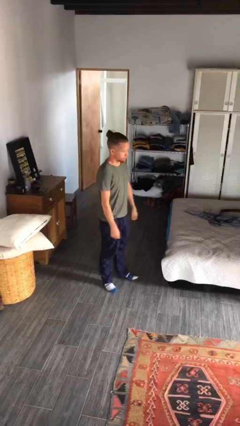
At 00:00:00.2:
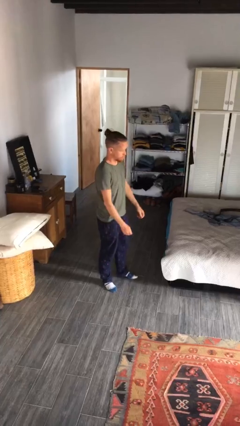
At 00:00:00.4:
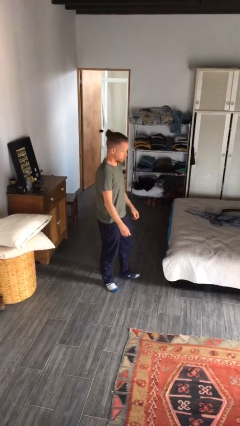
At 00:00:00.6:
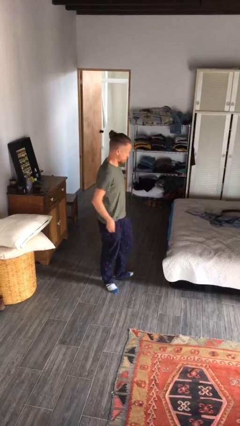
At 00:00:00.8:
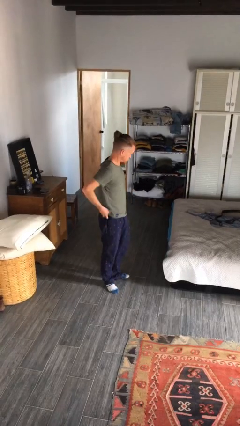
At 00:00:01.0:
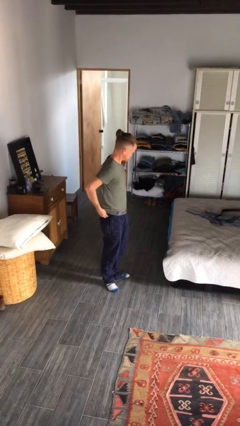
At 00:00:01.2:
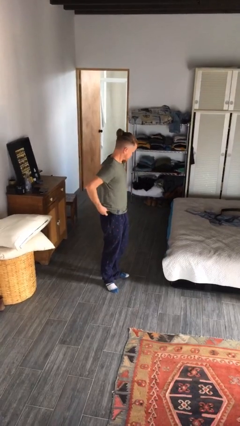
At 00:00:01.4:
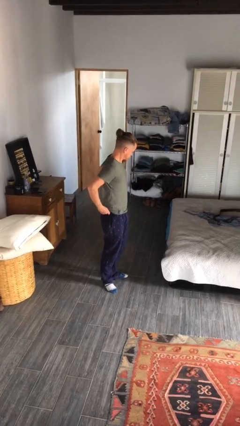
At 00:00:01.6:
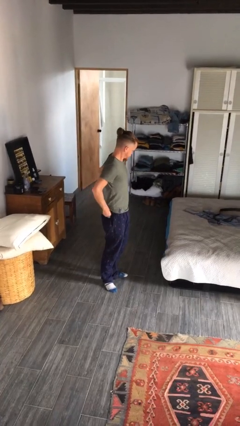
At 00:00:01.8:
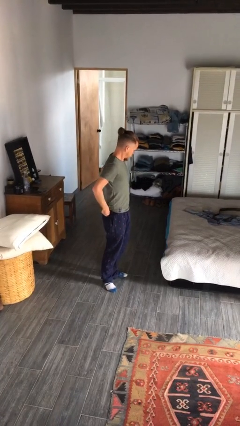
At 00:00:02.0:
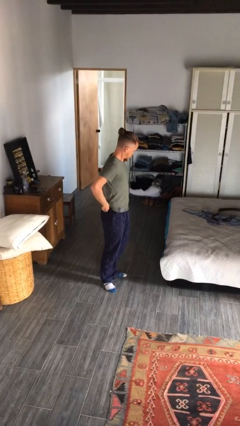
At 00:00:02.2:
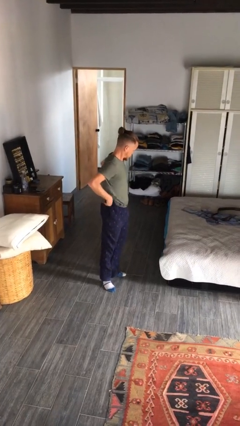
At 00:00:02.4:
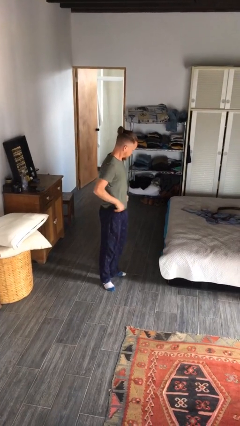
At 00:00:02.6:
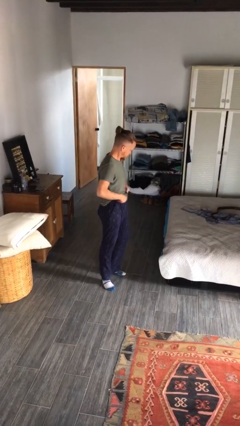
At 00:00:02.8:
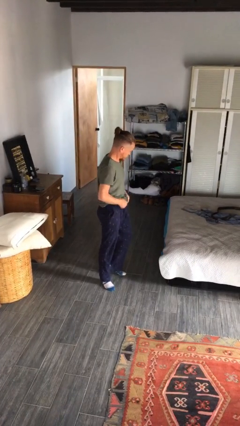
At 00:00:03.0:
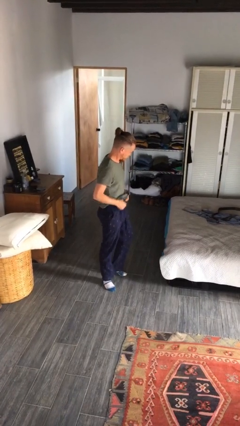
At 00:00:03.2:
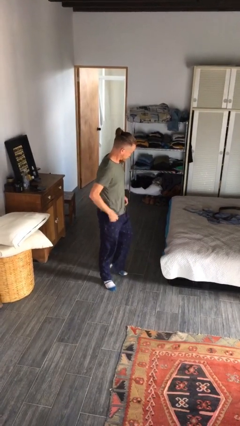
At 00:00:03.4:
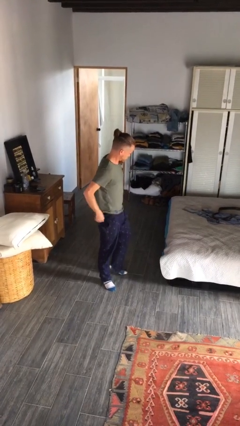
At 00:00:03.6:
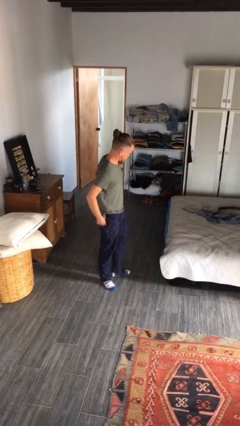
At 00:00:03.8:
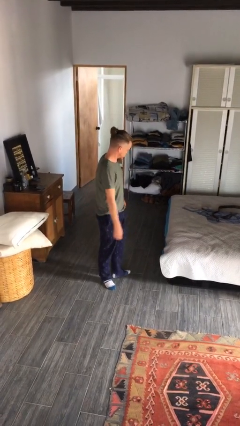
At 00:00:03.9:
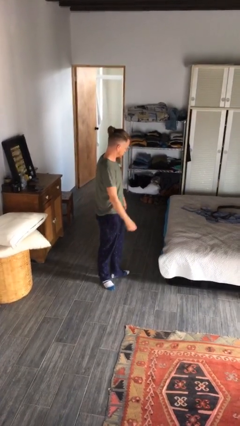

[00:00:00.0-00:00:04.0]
person hikes up pants

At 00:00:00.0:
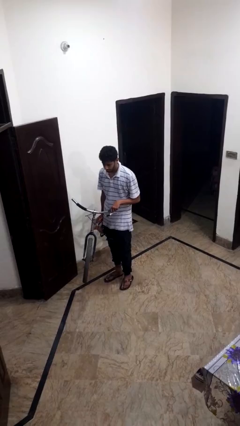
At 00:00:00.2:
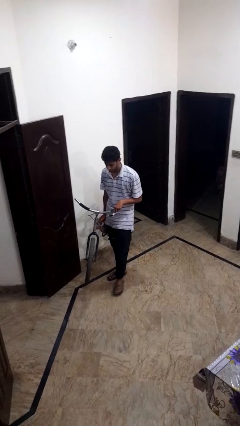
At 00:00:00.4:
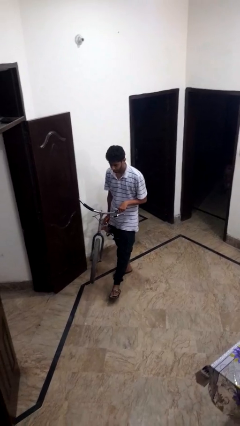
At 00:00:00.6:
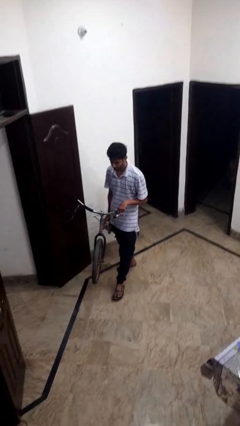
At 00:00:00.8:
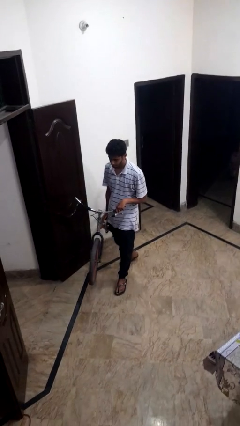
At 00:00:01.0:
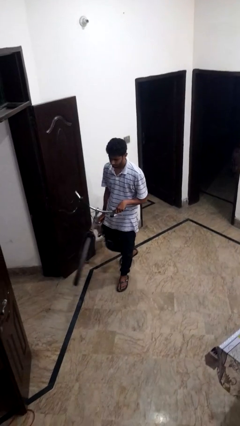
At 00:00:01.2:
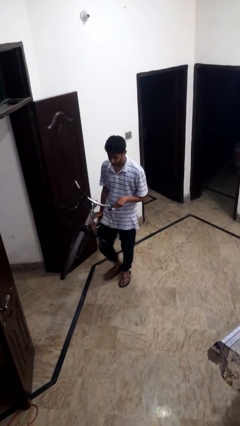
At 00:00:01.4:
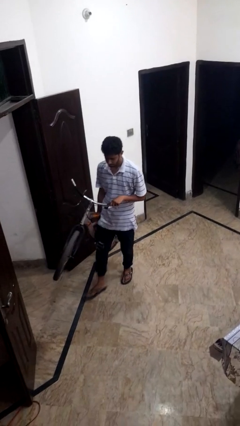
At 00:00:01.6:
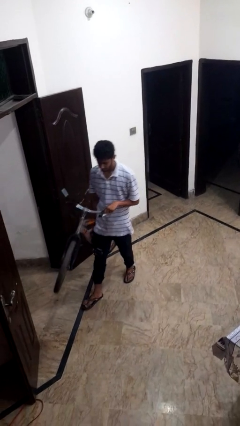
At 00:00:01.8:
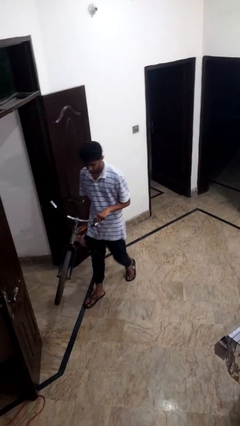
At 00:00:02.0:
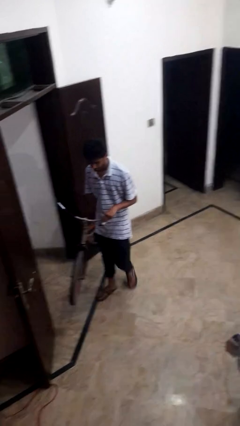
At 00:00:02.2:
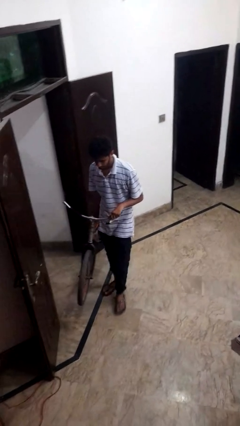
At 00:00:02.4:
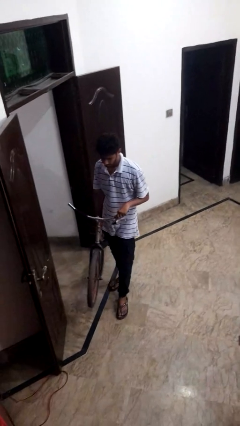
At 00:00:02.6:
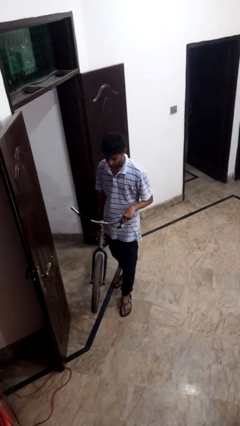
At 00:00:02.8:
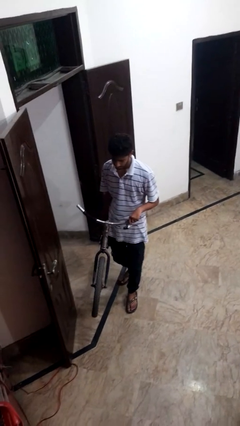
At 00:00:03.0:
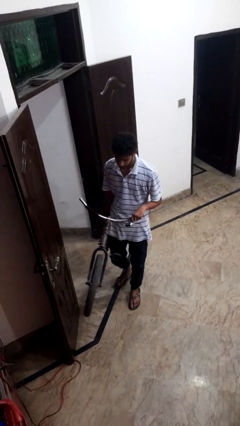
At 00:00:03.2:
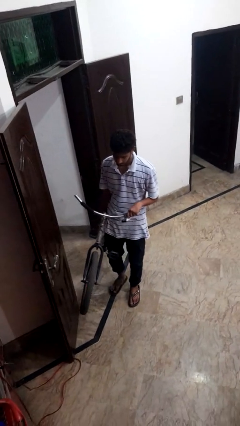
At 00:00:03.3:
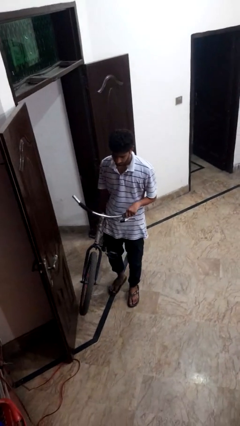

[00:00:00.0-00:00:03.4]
person carries bicycle

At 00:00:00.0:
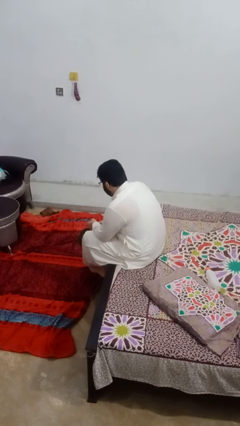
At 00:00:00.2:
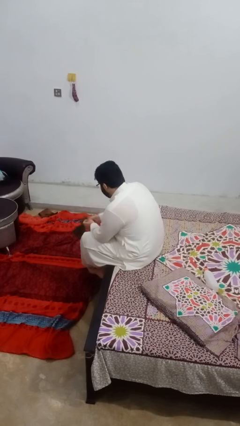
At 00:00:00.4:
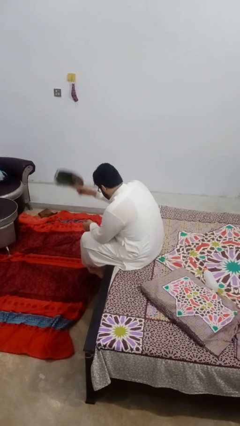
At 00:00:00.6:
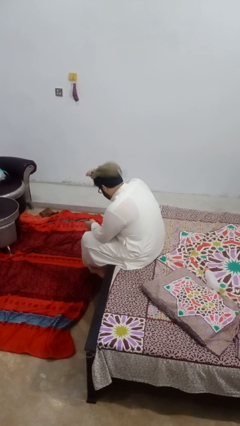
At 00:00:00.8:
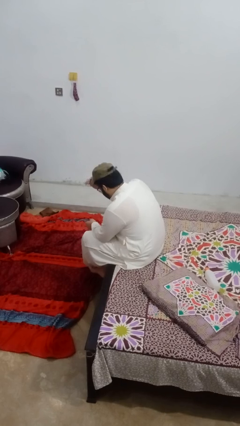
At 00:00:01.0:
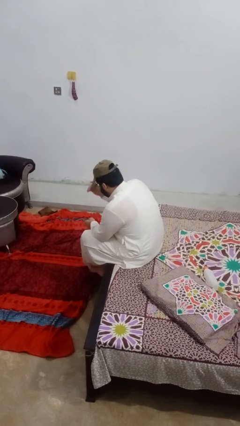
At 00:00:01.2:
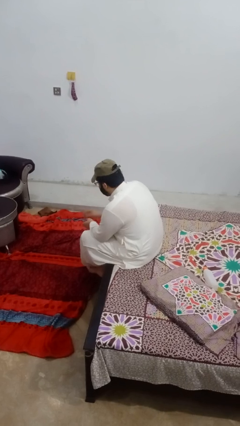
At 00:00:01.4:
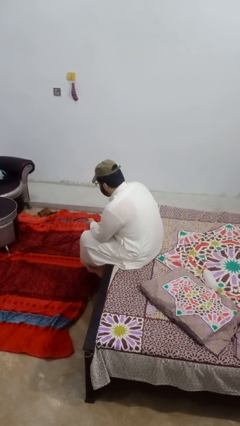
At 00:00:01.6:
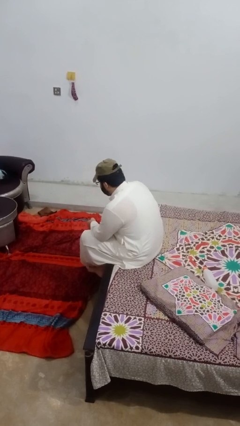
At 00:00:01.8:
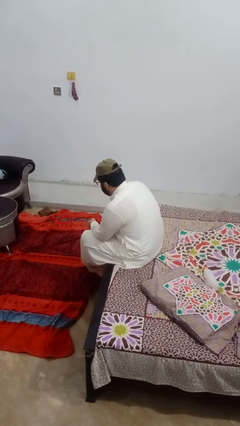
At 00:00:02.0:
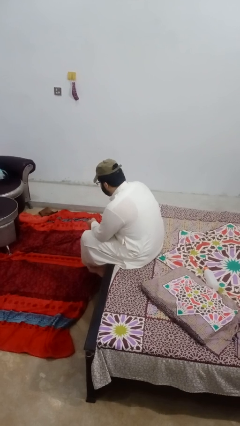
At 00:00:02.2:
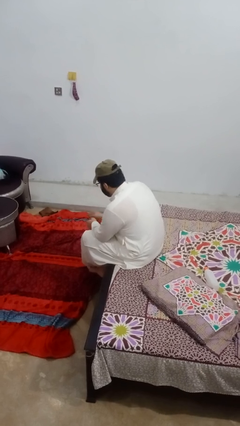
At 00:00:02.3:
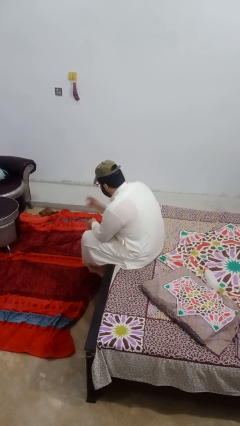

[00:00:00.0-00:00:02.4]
person puts on hat

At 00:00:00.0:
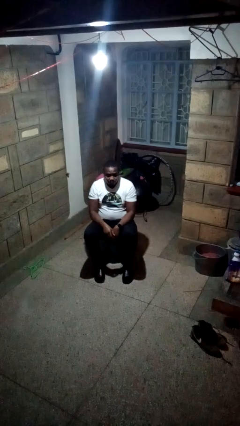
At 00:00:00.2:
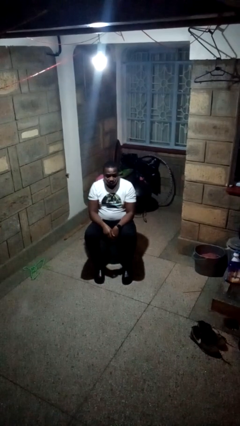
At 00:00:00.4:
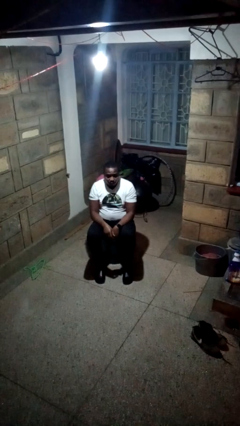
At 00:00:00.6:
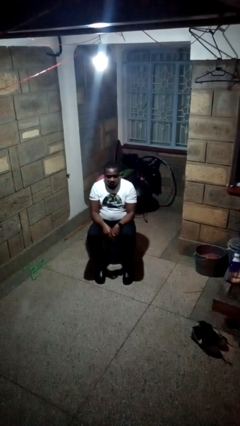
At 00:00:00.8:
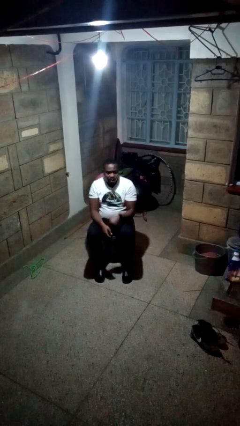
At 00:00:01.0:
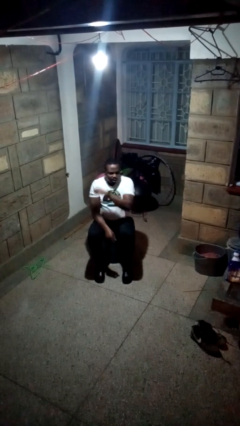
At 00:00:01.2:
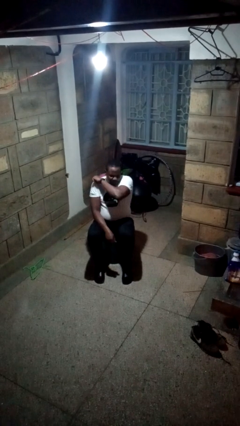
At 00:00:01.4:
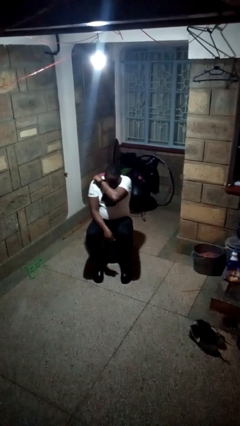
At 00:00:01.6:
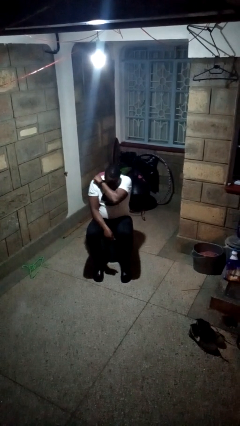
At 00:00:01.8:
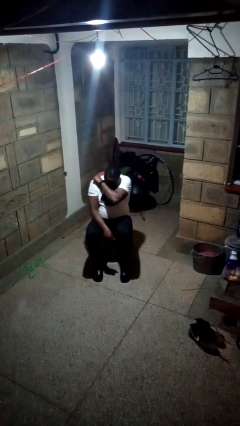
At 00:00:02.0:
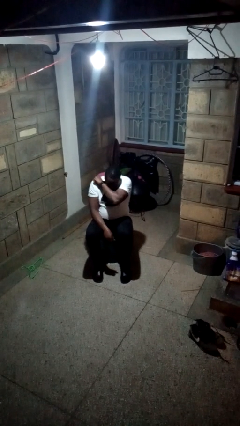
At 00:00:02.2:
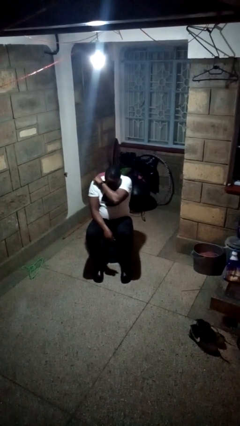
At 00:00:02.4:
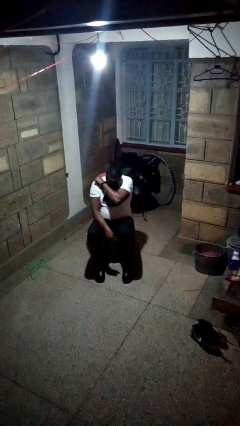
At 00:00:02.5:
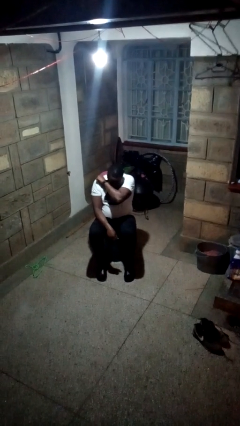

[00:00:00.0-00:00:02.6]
person sneezes into arm

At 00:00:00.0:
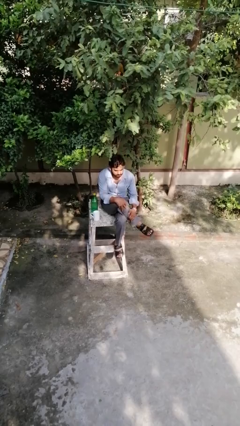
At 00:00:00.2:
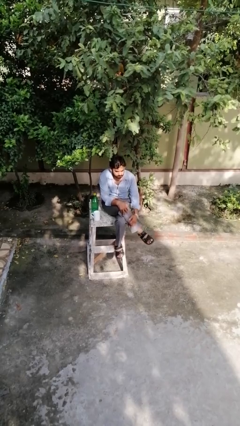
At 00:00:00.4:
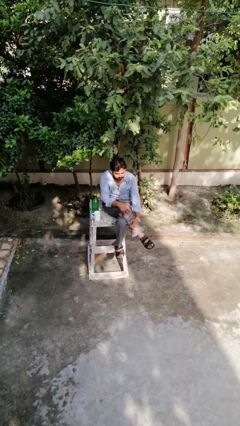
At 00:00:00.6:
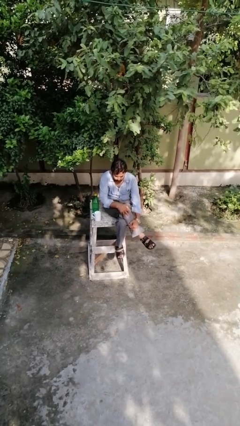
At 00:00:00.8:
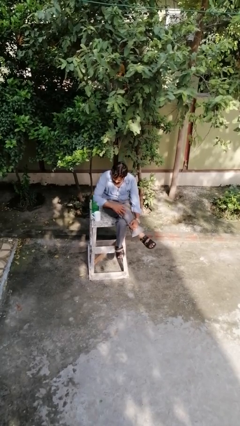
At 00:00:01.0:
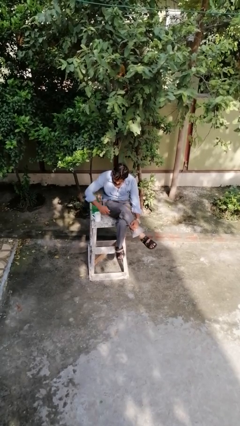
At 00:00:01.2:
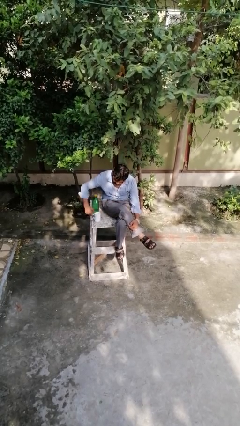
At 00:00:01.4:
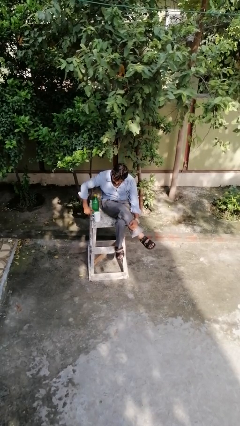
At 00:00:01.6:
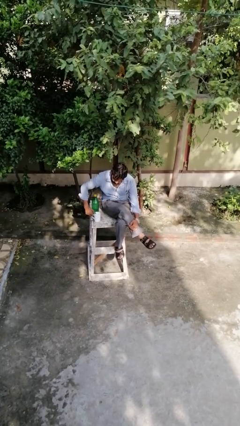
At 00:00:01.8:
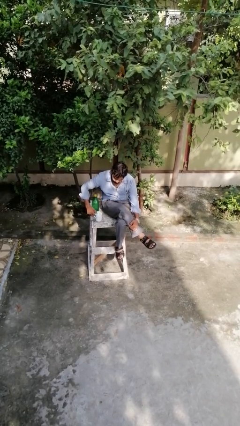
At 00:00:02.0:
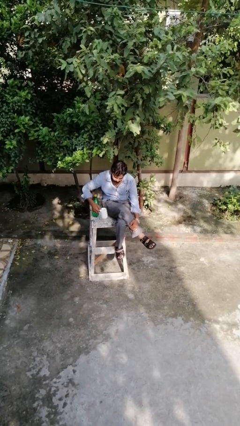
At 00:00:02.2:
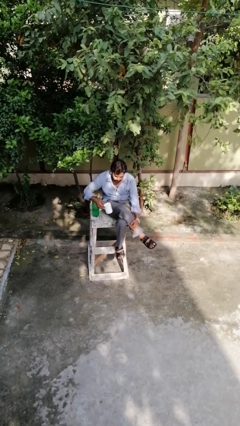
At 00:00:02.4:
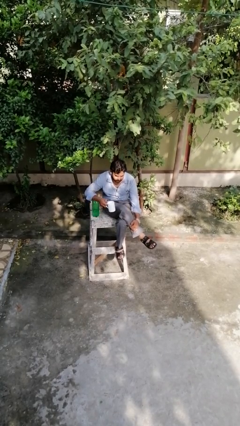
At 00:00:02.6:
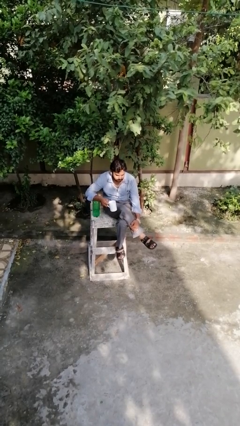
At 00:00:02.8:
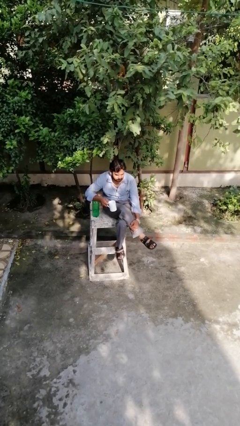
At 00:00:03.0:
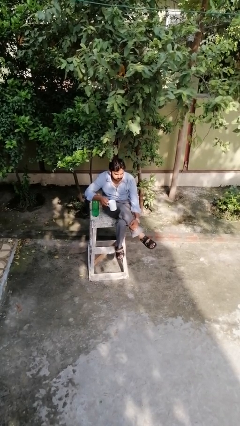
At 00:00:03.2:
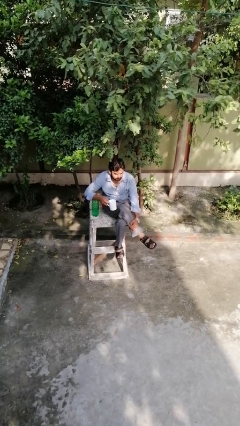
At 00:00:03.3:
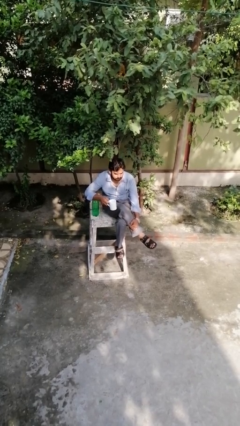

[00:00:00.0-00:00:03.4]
person picks up object from table

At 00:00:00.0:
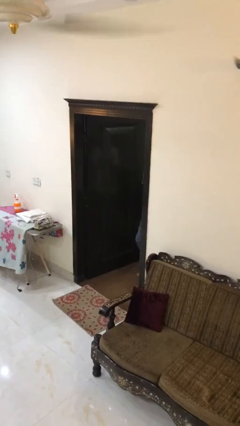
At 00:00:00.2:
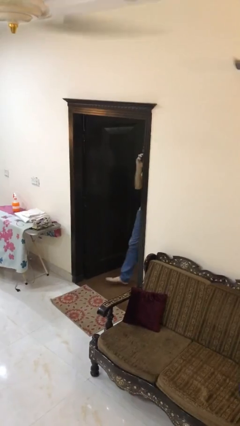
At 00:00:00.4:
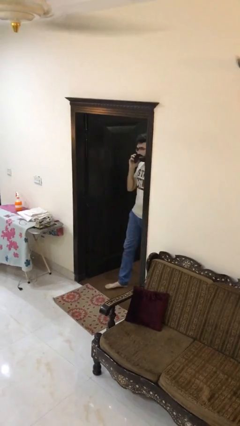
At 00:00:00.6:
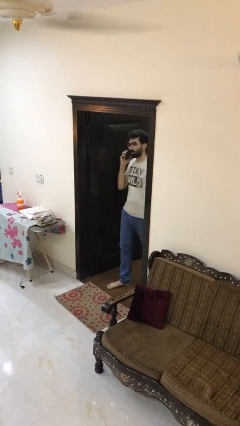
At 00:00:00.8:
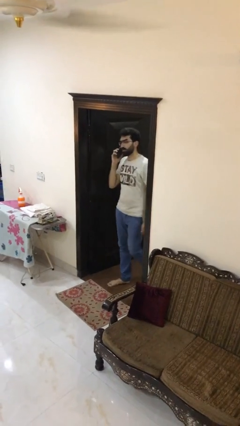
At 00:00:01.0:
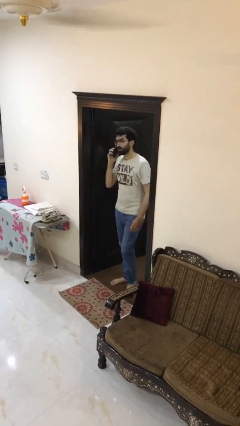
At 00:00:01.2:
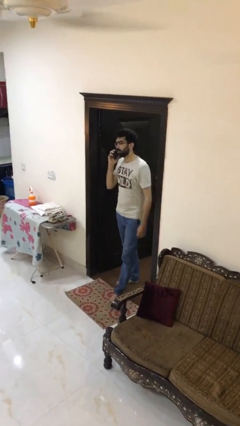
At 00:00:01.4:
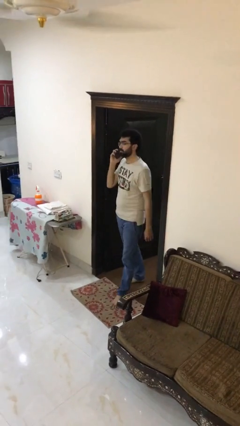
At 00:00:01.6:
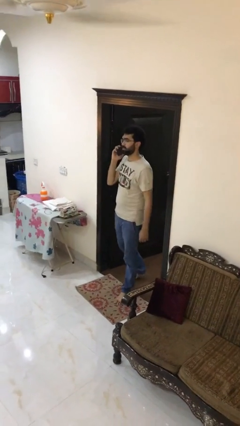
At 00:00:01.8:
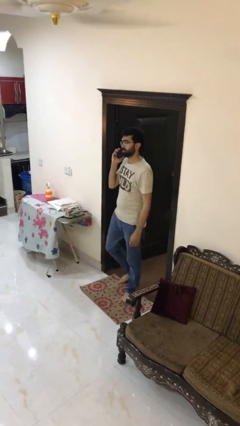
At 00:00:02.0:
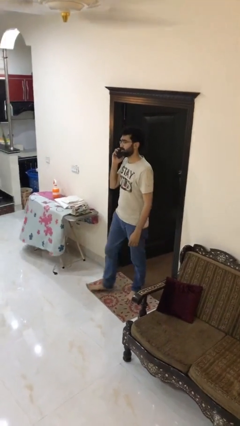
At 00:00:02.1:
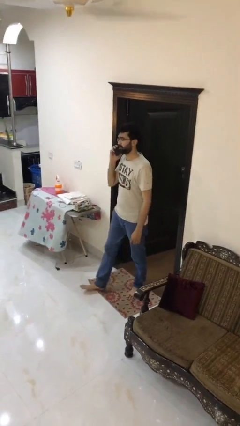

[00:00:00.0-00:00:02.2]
person enters scene through structure
